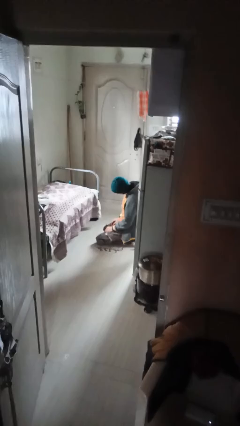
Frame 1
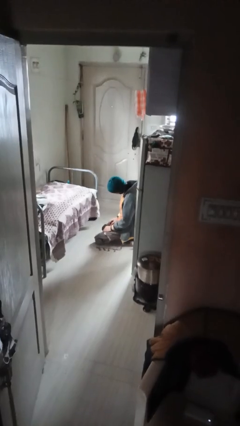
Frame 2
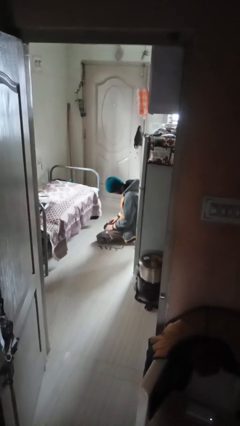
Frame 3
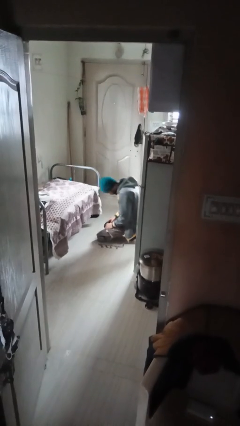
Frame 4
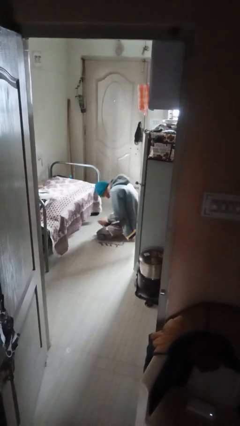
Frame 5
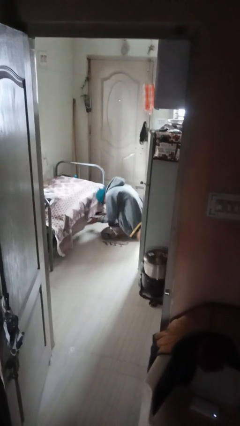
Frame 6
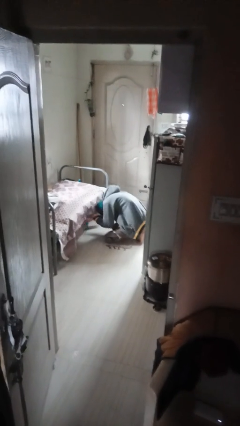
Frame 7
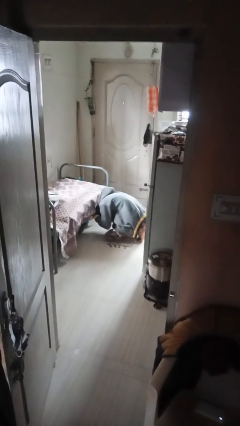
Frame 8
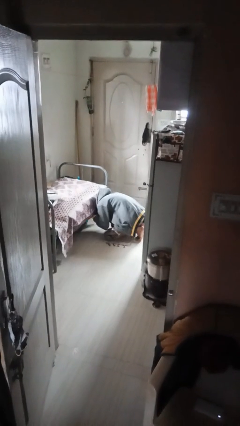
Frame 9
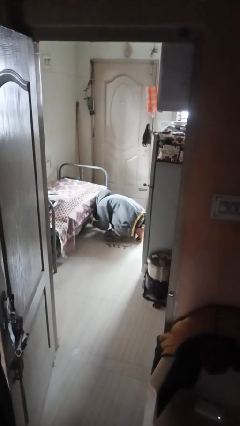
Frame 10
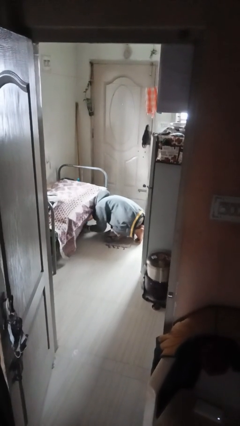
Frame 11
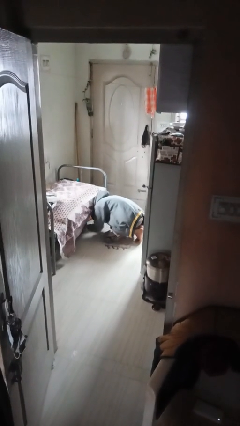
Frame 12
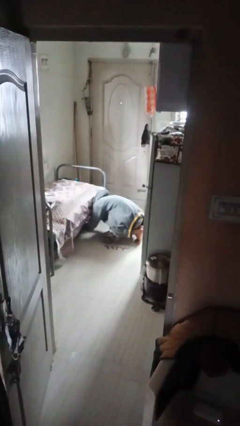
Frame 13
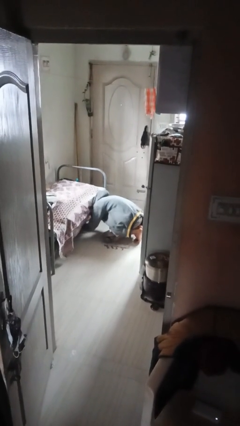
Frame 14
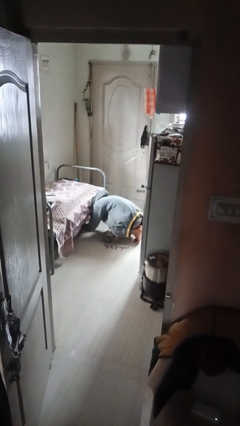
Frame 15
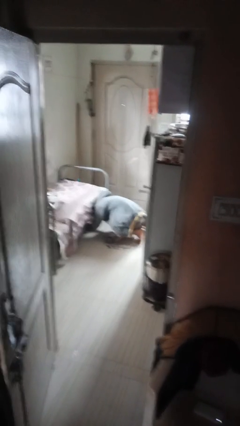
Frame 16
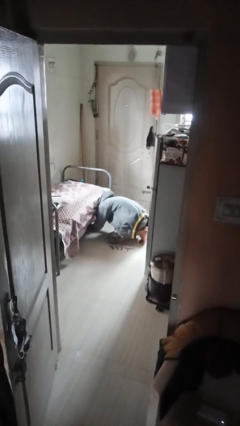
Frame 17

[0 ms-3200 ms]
person searches under bed

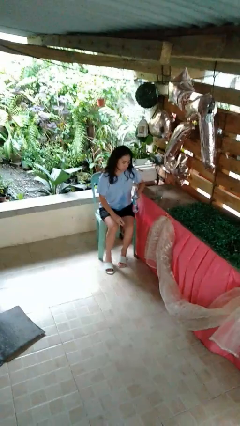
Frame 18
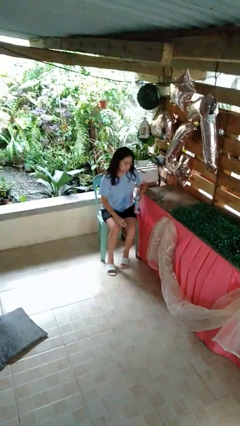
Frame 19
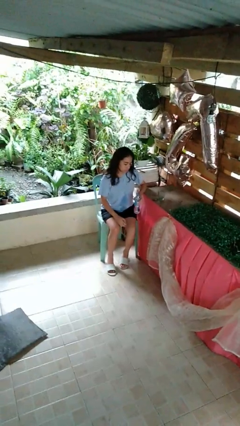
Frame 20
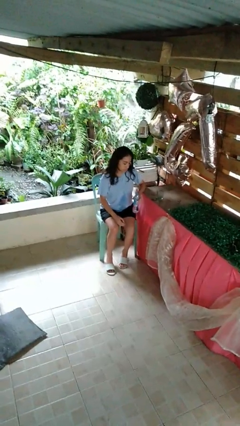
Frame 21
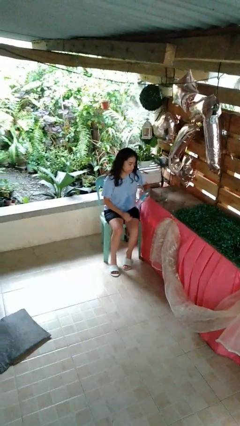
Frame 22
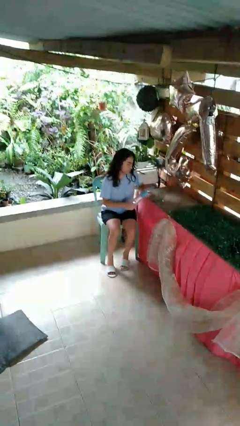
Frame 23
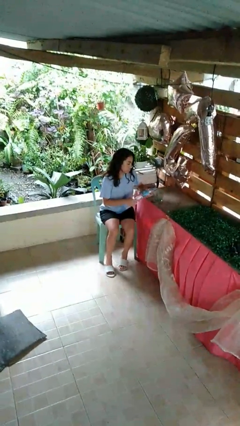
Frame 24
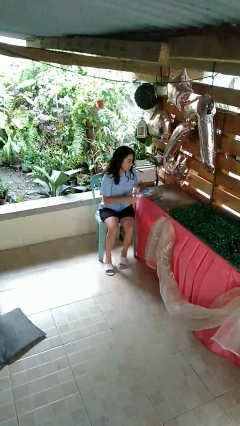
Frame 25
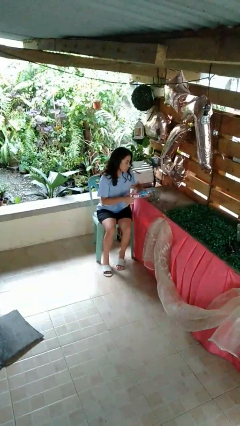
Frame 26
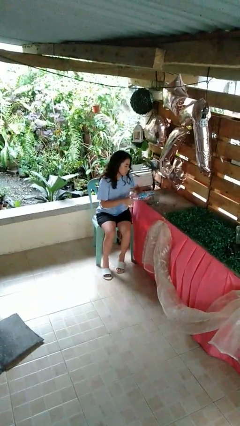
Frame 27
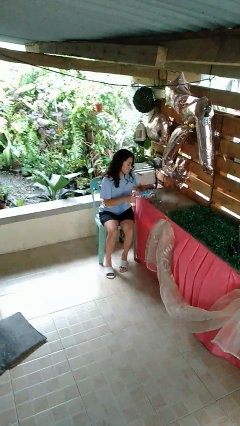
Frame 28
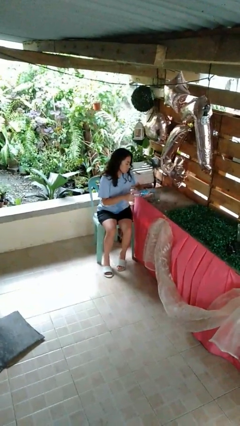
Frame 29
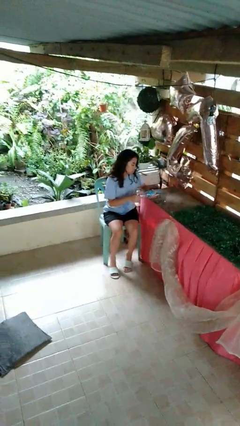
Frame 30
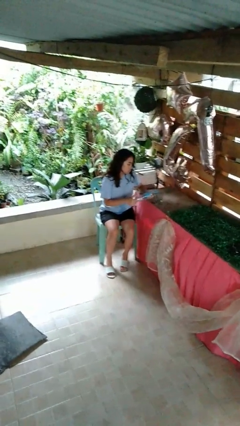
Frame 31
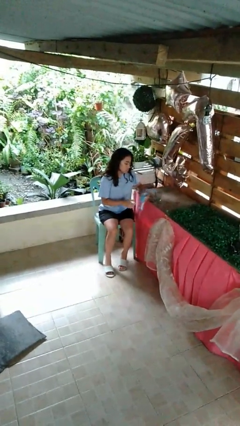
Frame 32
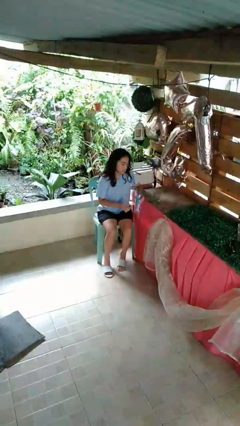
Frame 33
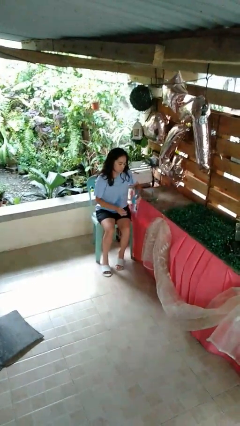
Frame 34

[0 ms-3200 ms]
person pours liquid into cup

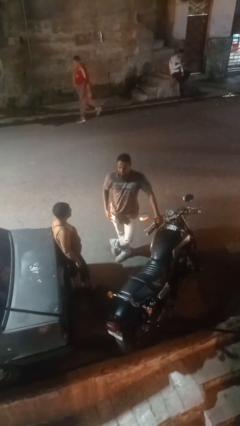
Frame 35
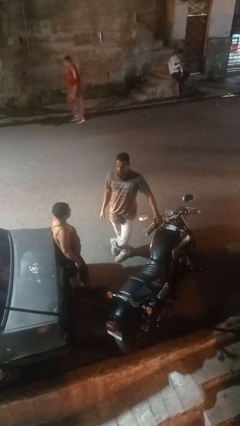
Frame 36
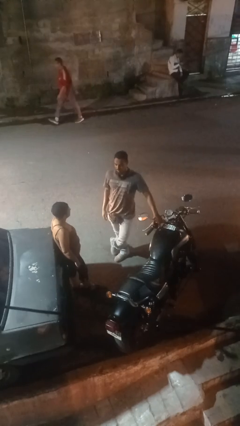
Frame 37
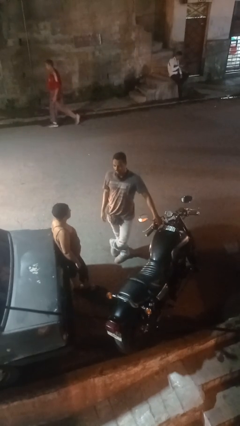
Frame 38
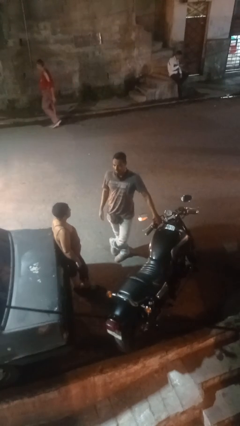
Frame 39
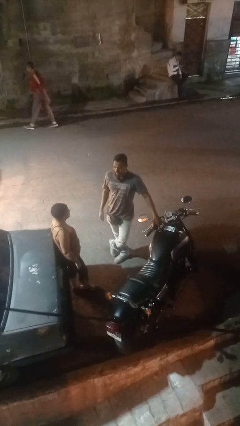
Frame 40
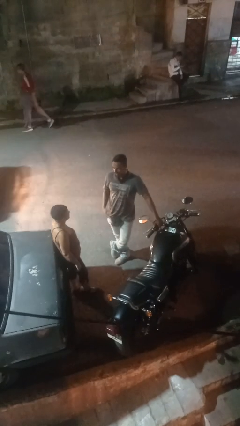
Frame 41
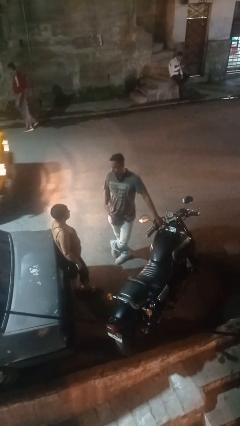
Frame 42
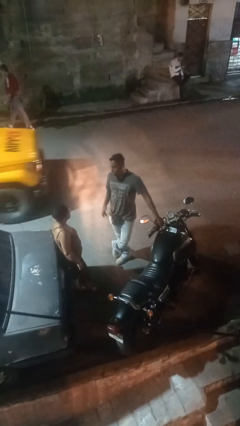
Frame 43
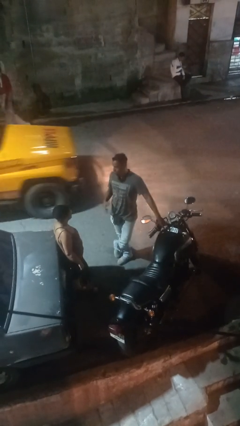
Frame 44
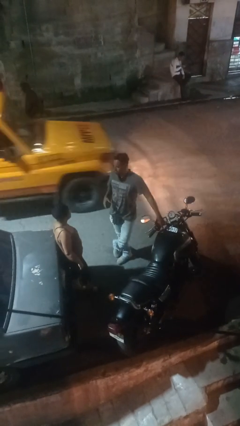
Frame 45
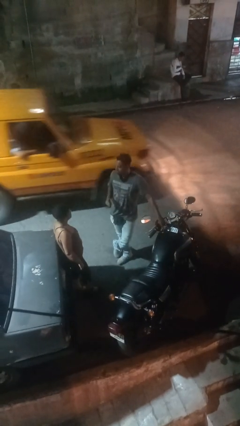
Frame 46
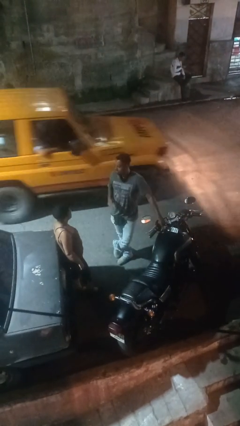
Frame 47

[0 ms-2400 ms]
person talks to person

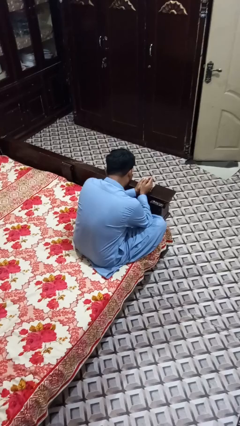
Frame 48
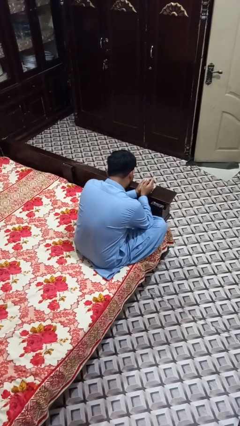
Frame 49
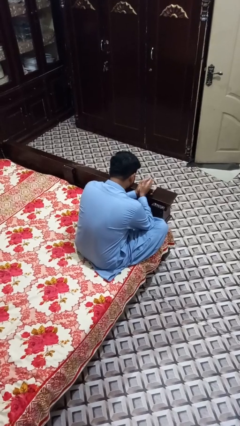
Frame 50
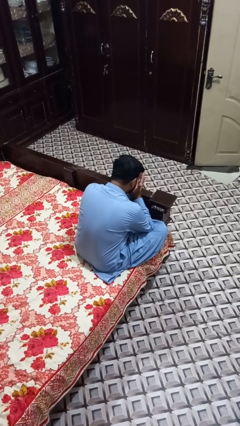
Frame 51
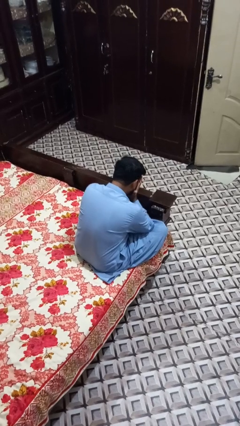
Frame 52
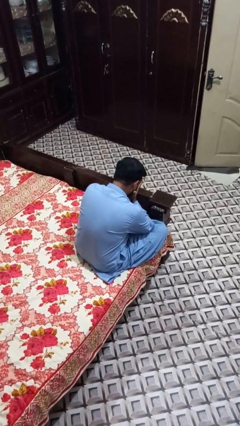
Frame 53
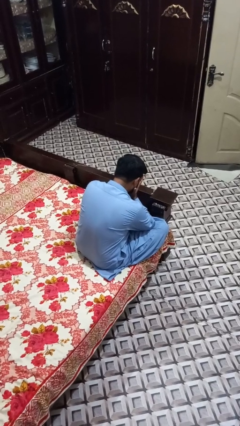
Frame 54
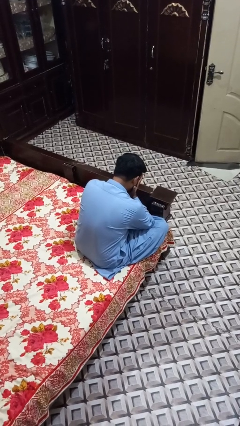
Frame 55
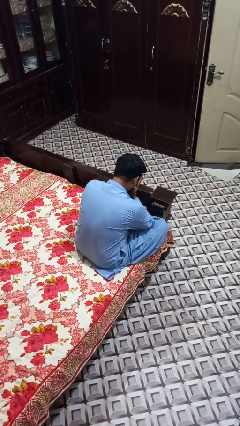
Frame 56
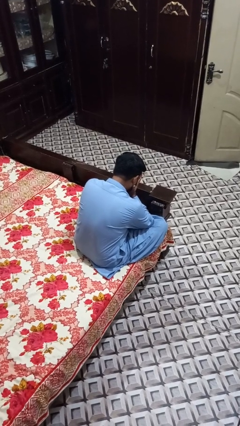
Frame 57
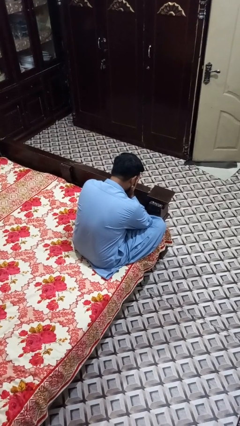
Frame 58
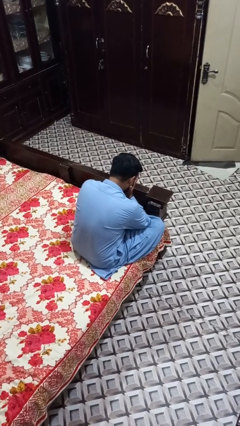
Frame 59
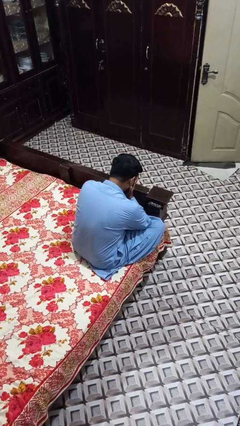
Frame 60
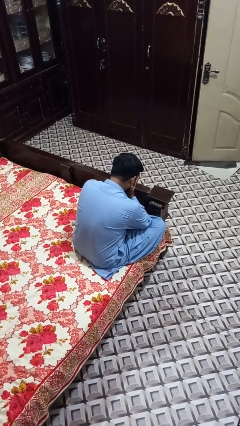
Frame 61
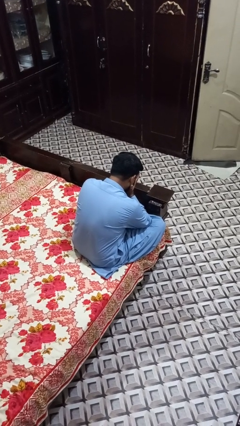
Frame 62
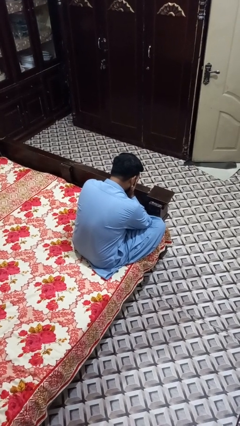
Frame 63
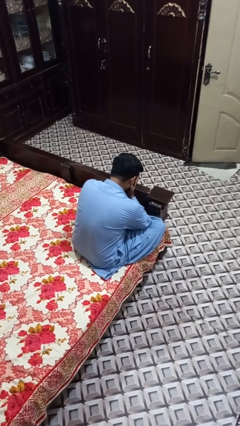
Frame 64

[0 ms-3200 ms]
person covers face with hands

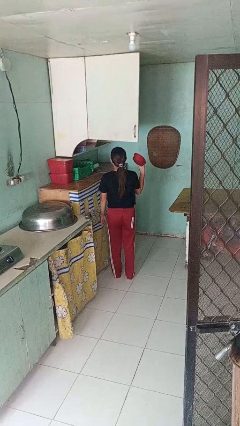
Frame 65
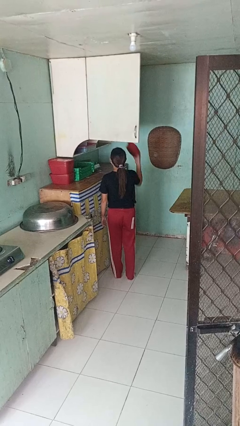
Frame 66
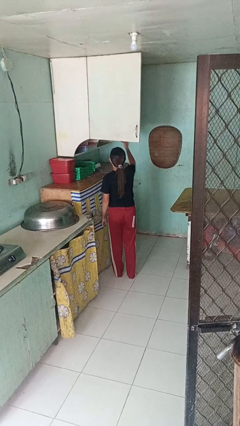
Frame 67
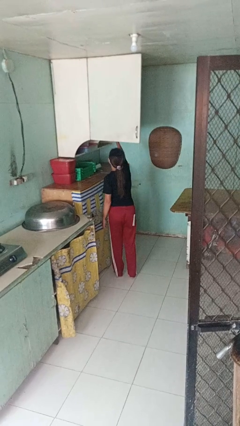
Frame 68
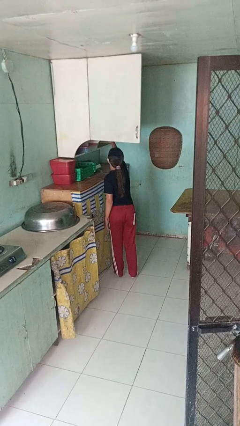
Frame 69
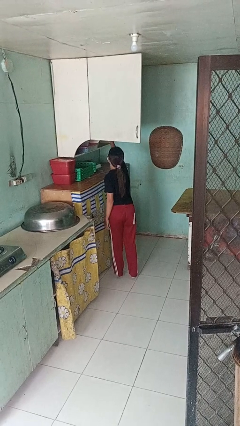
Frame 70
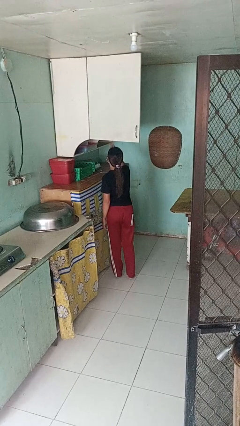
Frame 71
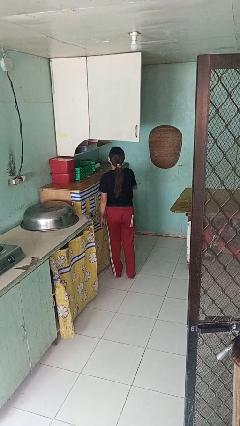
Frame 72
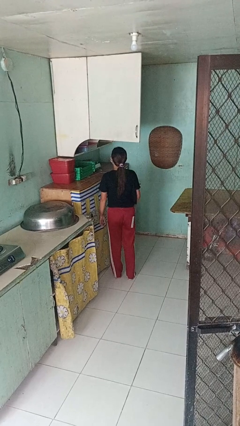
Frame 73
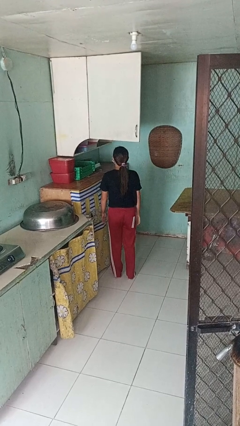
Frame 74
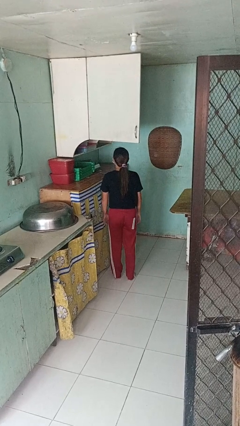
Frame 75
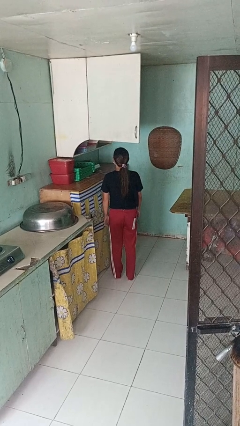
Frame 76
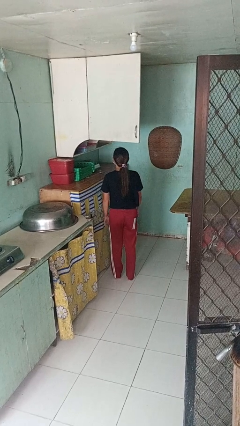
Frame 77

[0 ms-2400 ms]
person puts object in cabinet

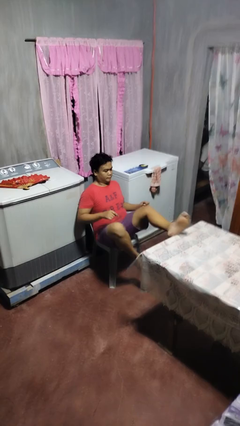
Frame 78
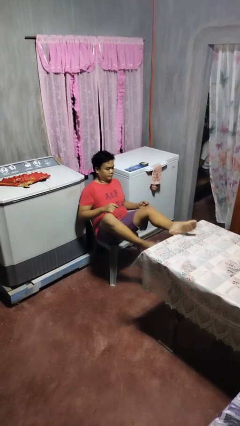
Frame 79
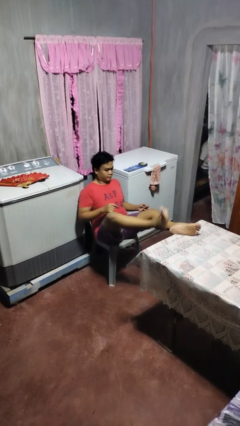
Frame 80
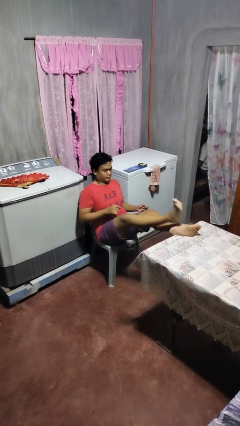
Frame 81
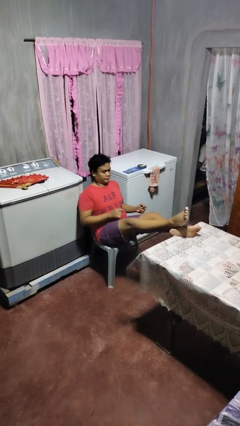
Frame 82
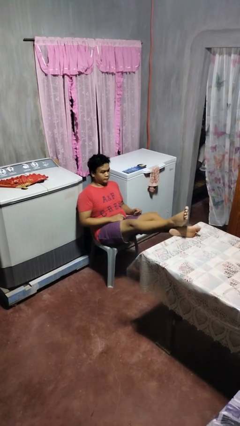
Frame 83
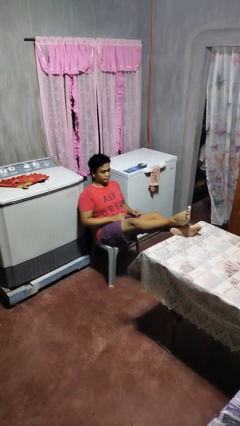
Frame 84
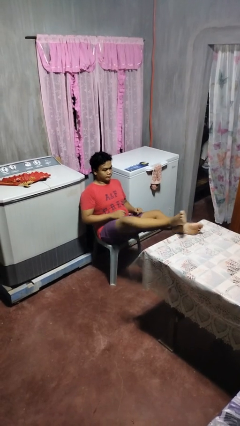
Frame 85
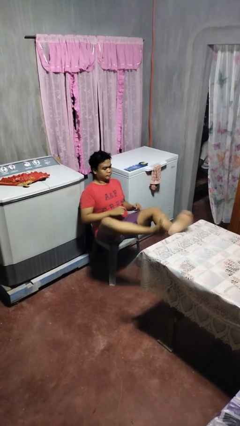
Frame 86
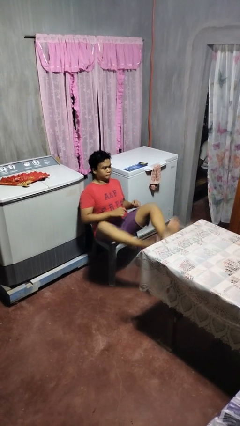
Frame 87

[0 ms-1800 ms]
person puts feet up

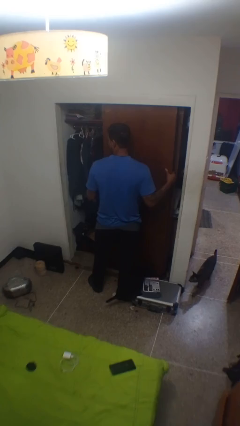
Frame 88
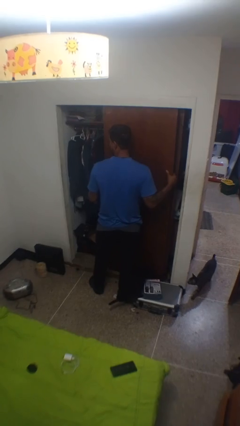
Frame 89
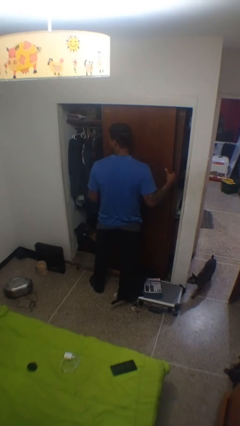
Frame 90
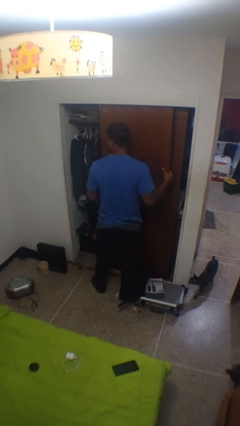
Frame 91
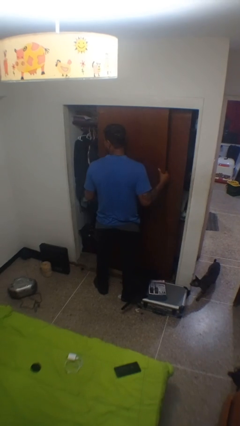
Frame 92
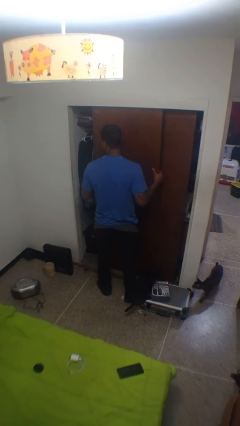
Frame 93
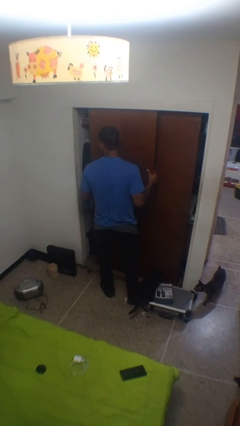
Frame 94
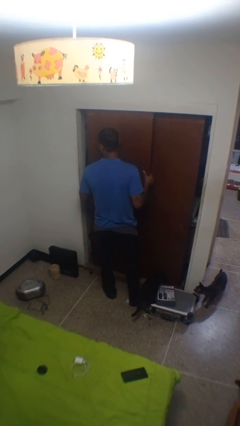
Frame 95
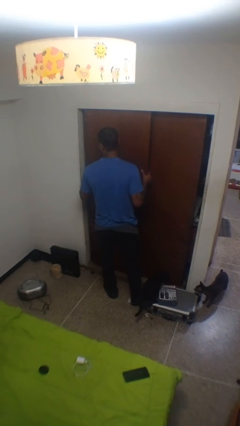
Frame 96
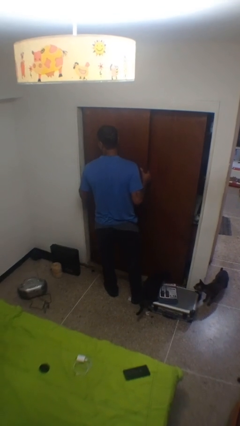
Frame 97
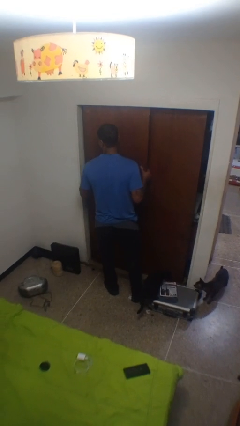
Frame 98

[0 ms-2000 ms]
person closes closet door
